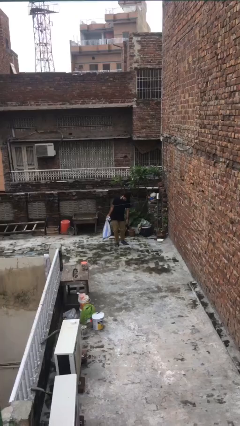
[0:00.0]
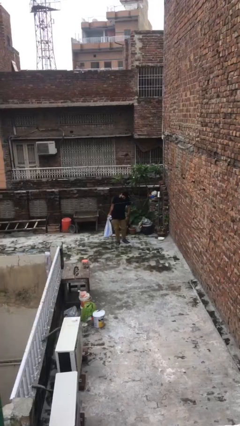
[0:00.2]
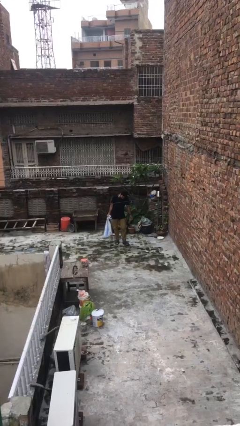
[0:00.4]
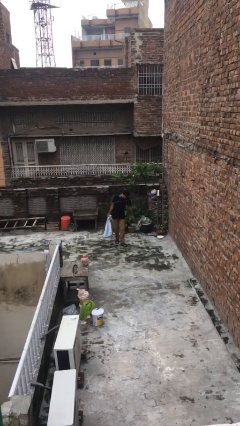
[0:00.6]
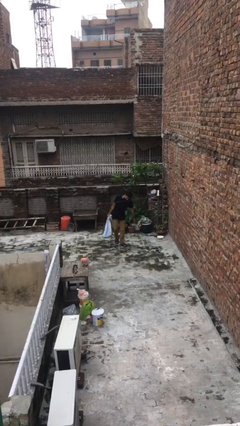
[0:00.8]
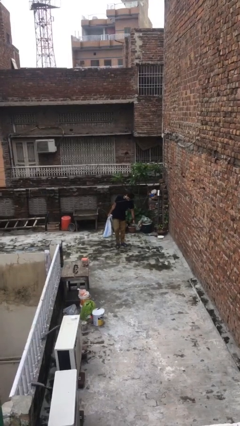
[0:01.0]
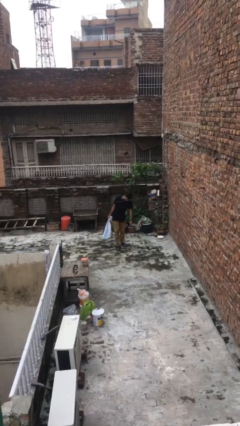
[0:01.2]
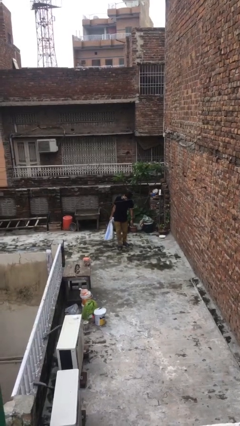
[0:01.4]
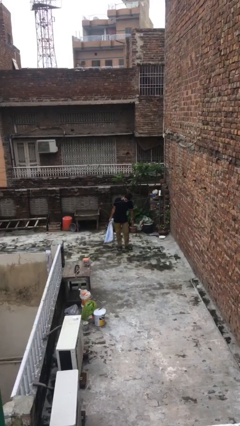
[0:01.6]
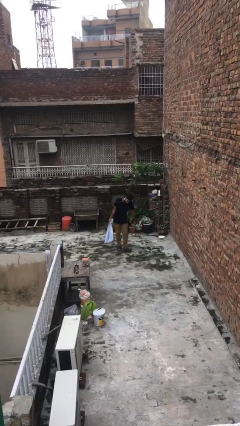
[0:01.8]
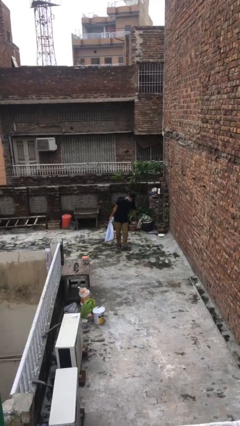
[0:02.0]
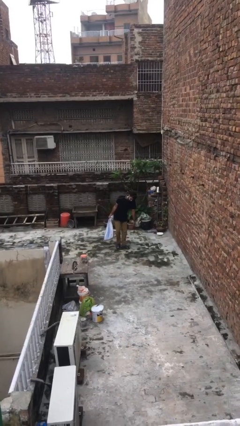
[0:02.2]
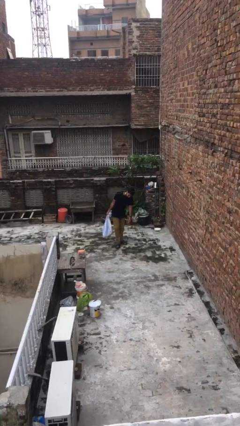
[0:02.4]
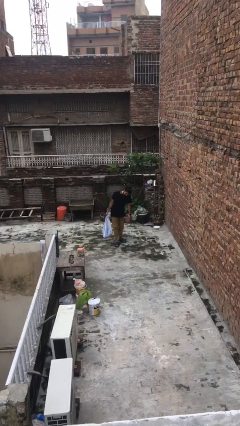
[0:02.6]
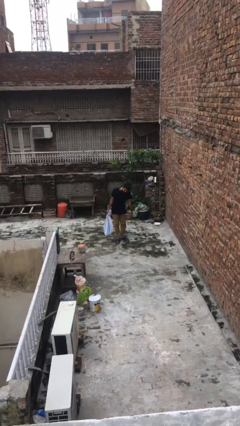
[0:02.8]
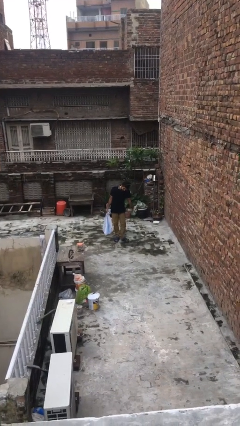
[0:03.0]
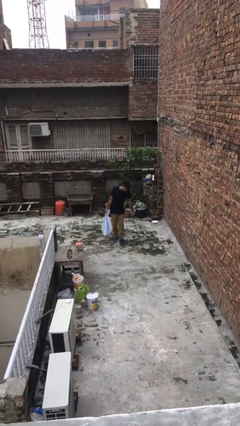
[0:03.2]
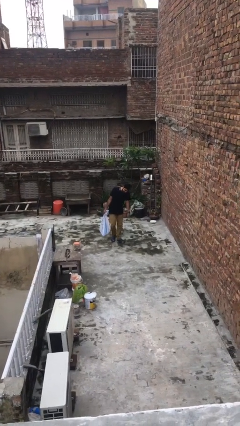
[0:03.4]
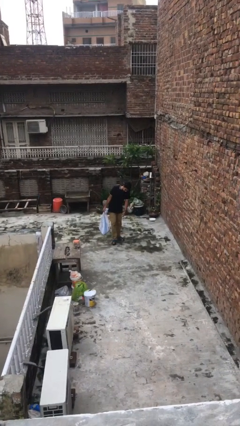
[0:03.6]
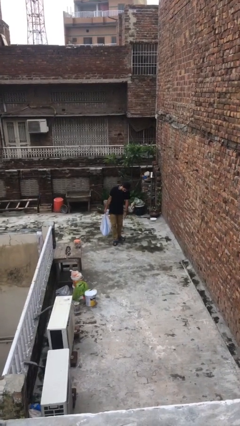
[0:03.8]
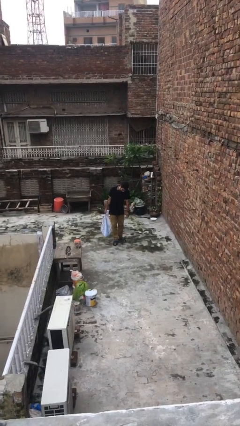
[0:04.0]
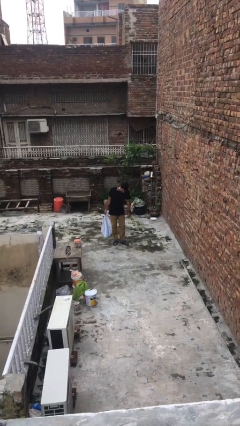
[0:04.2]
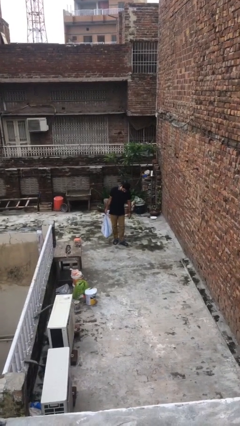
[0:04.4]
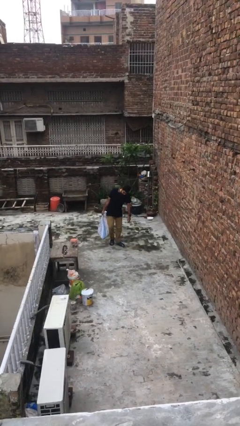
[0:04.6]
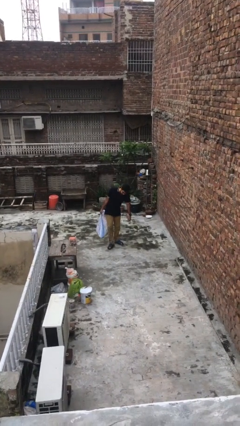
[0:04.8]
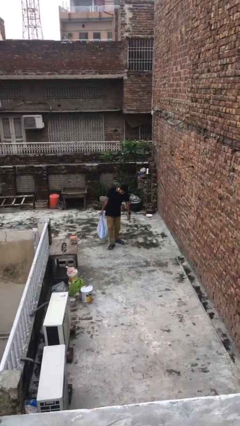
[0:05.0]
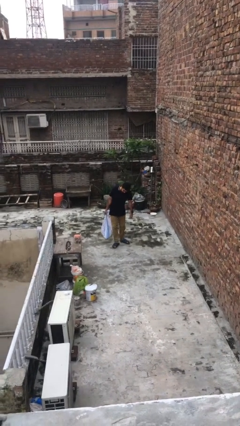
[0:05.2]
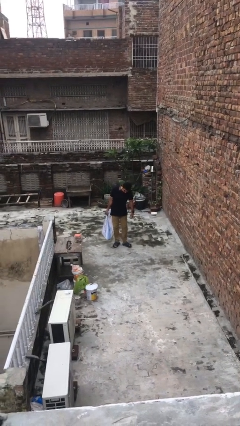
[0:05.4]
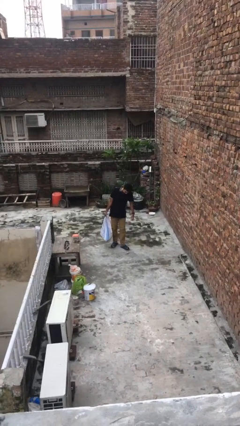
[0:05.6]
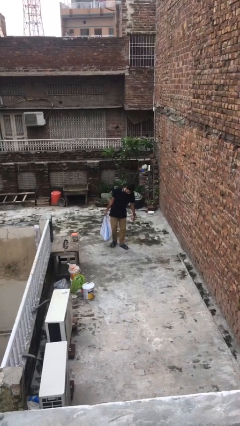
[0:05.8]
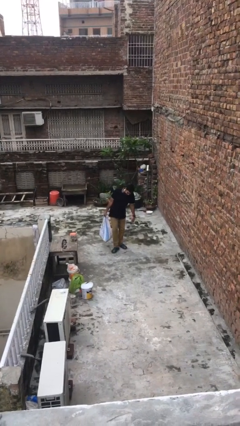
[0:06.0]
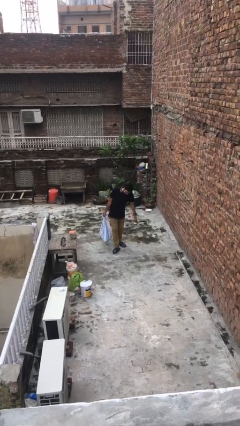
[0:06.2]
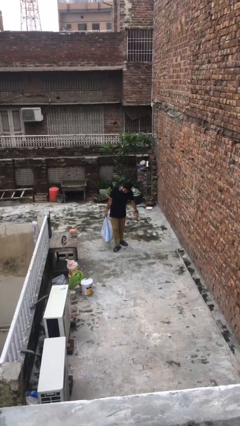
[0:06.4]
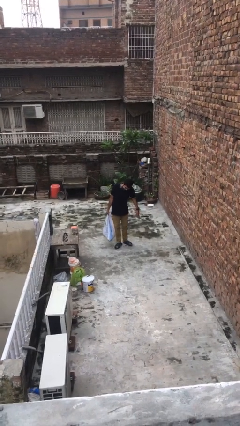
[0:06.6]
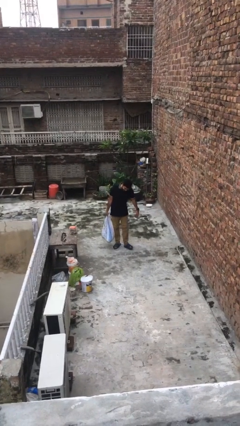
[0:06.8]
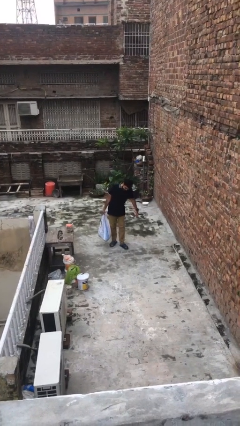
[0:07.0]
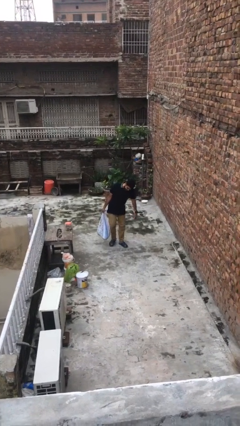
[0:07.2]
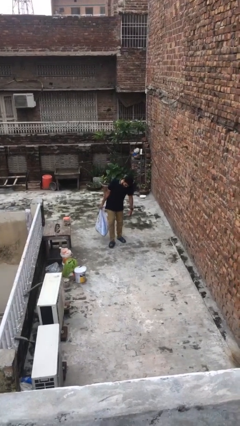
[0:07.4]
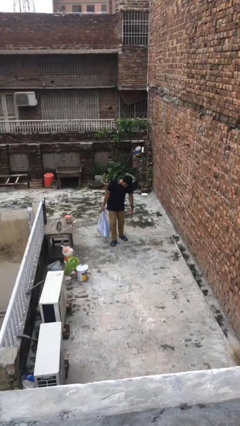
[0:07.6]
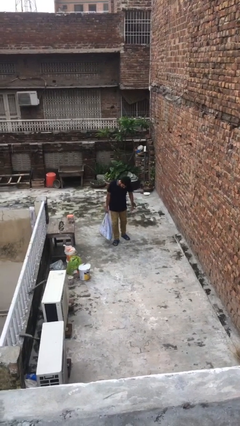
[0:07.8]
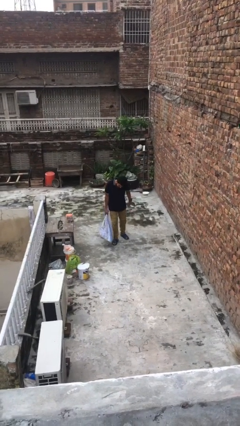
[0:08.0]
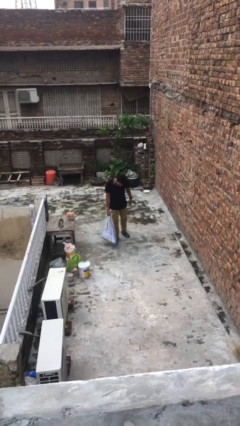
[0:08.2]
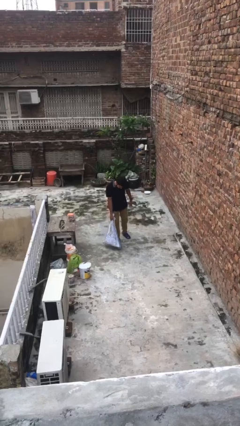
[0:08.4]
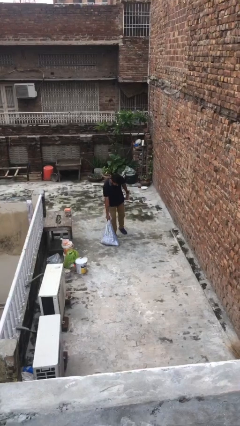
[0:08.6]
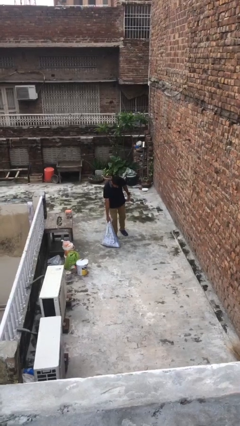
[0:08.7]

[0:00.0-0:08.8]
person carries heavy object

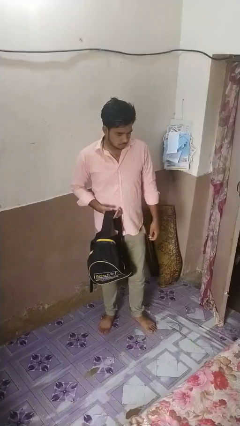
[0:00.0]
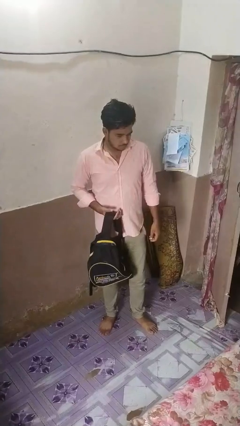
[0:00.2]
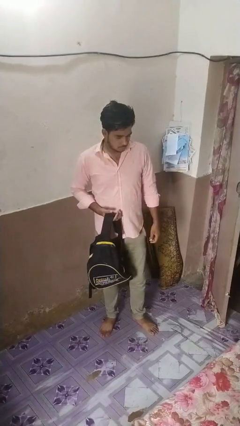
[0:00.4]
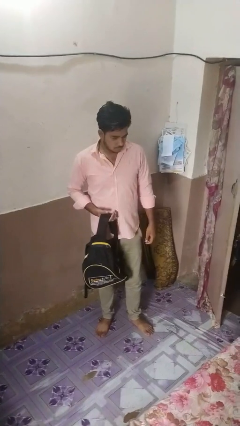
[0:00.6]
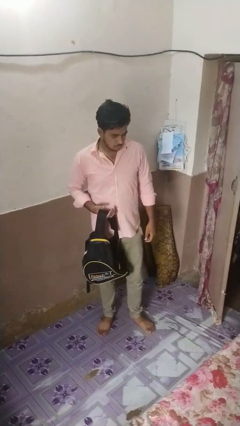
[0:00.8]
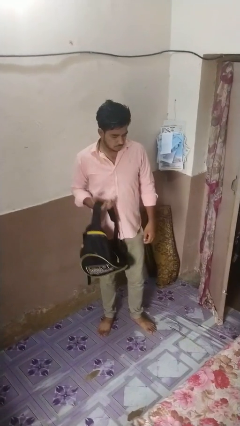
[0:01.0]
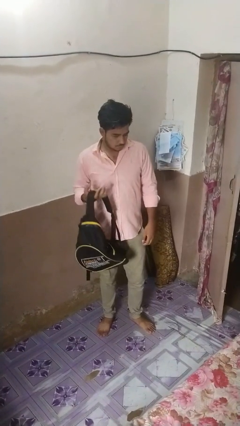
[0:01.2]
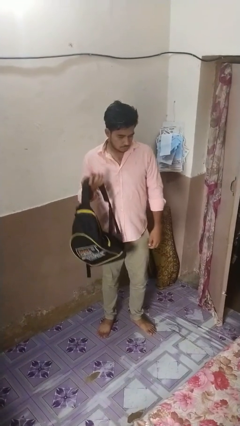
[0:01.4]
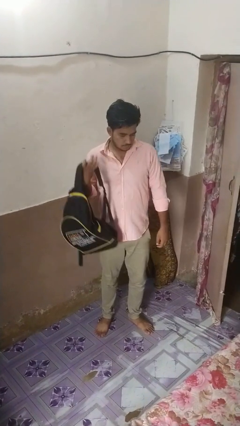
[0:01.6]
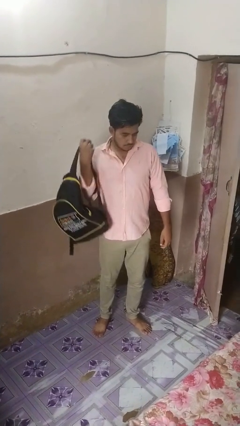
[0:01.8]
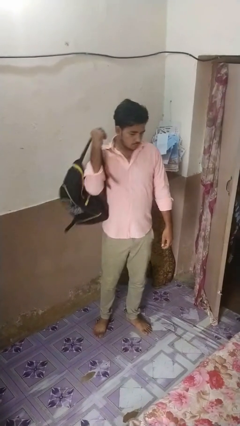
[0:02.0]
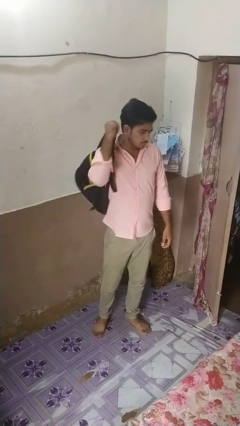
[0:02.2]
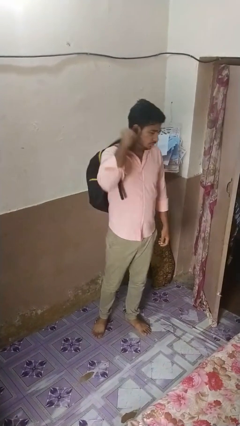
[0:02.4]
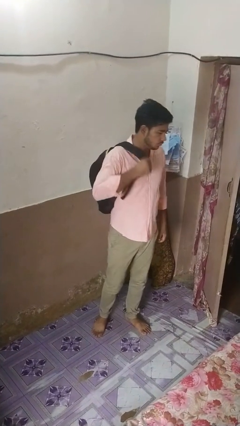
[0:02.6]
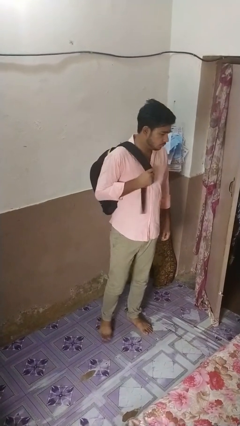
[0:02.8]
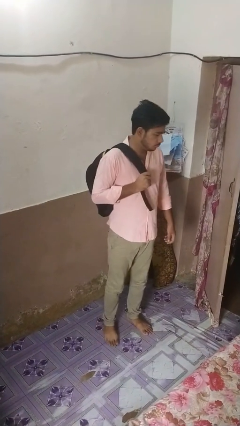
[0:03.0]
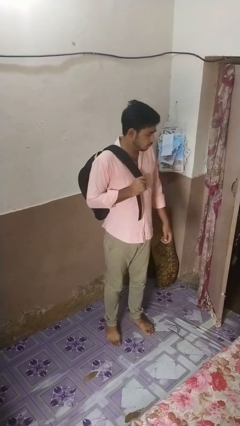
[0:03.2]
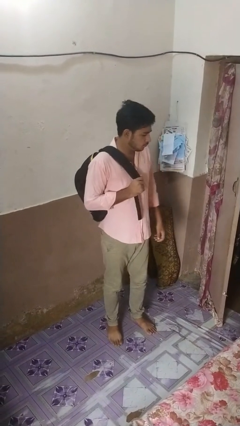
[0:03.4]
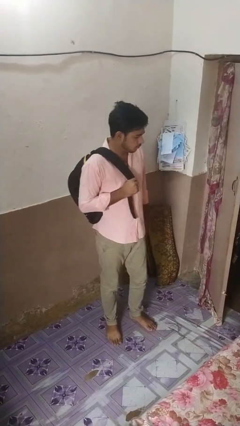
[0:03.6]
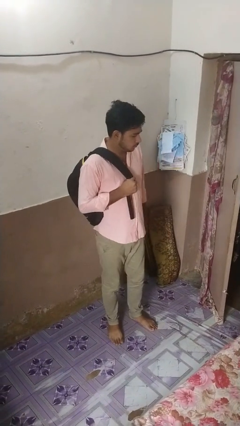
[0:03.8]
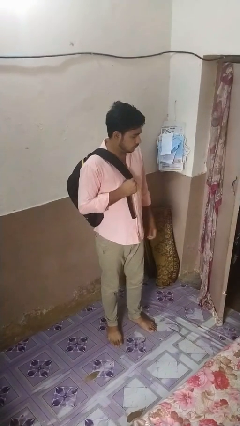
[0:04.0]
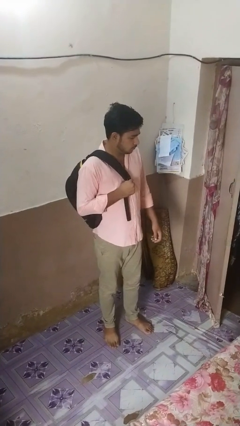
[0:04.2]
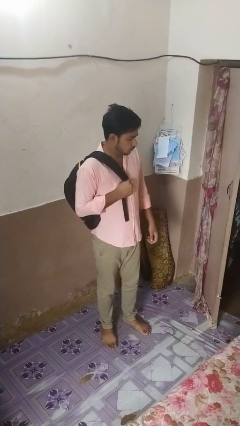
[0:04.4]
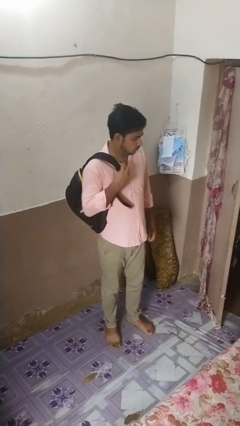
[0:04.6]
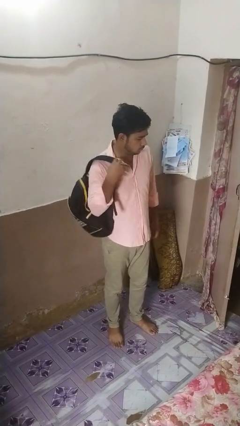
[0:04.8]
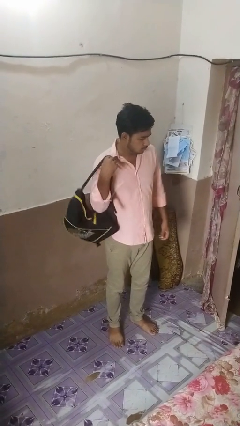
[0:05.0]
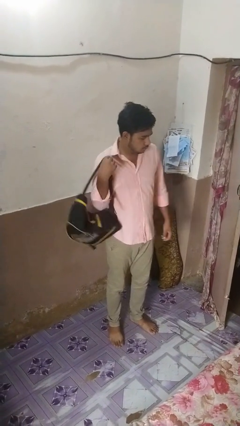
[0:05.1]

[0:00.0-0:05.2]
person puts on backpack

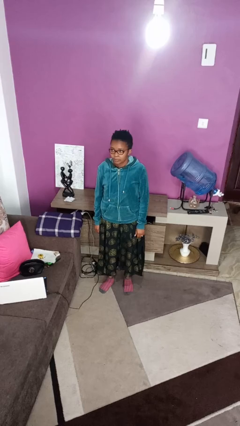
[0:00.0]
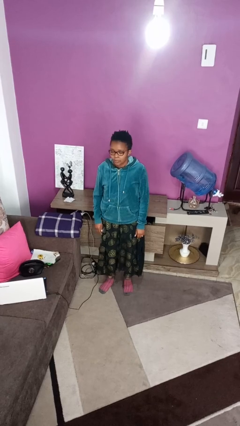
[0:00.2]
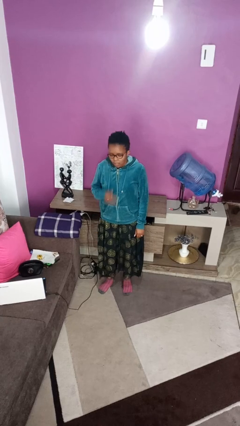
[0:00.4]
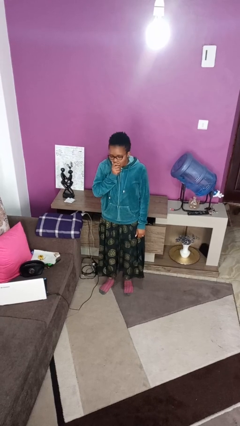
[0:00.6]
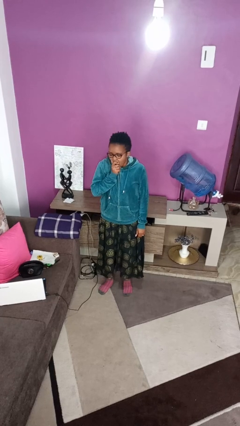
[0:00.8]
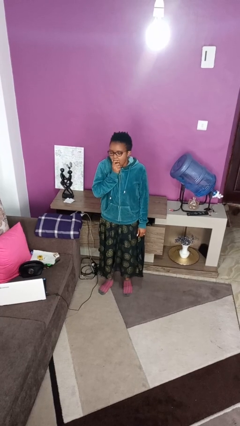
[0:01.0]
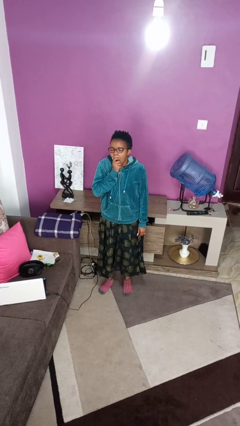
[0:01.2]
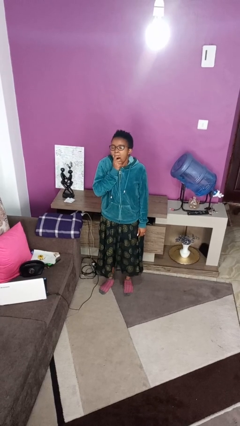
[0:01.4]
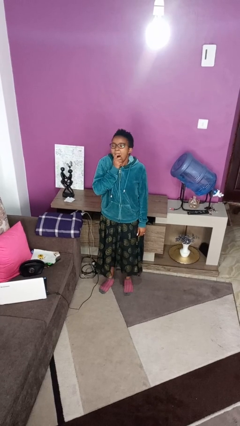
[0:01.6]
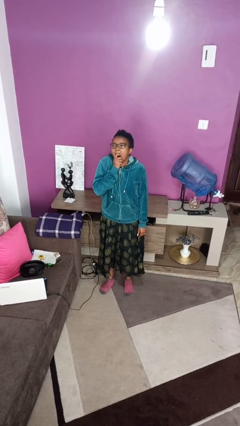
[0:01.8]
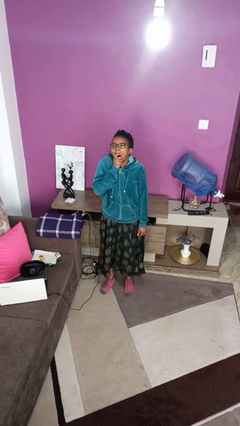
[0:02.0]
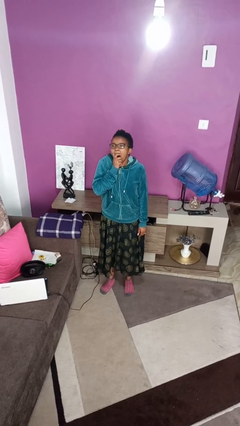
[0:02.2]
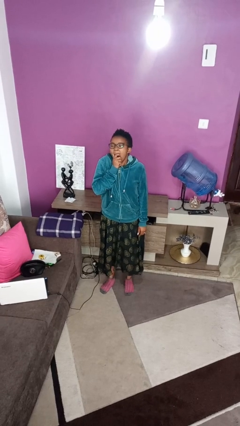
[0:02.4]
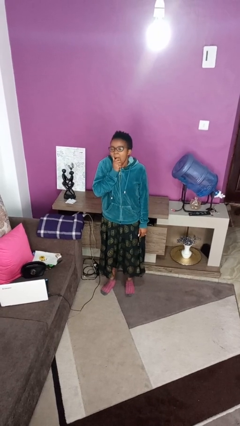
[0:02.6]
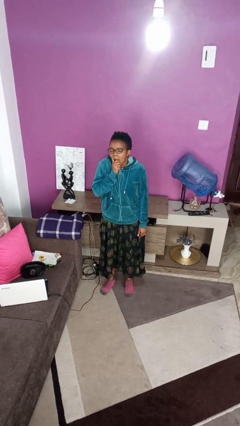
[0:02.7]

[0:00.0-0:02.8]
person yawns

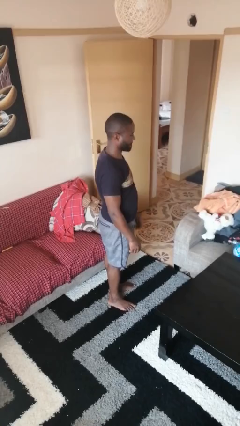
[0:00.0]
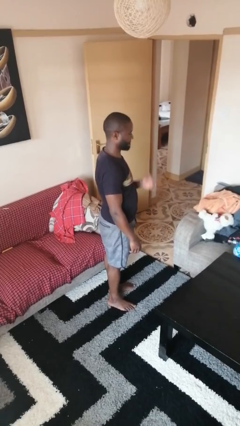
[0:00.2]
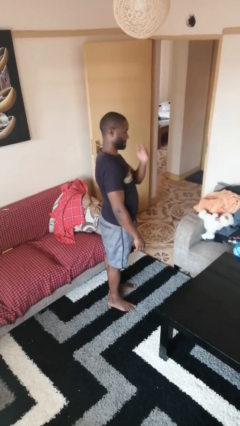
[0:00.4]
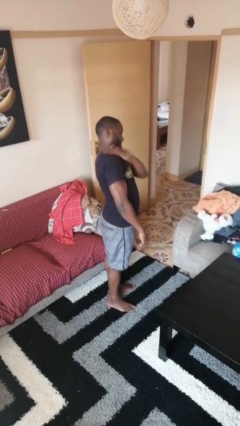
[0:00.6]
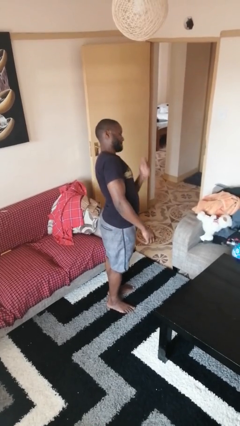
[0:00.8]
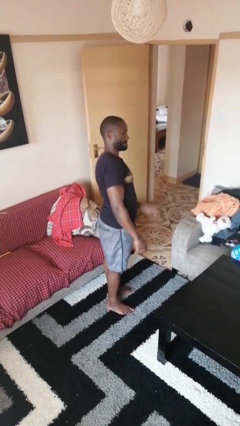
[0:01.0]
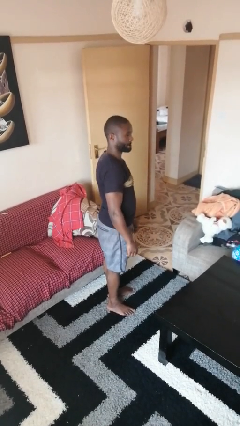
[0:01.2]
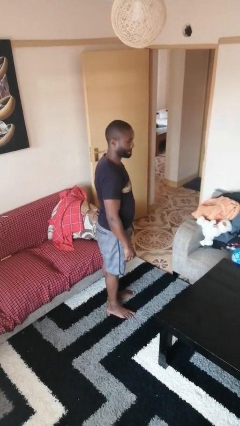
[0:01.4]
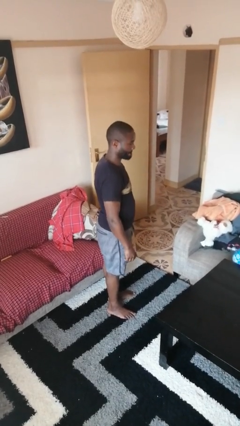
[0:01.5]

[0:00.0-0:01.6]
person swats bug
